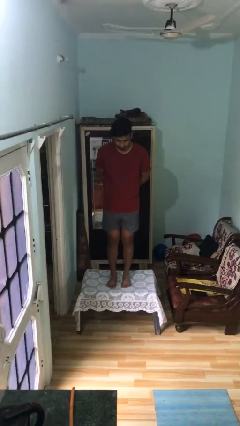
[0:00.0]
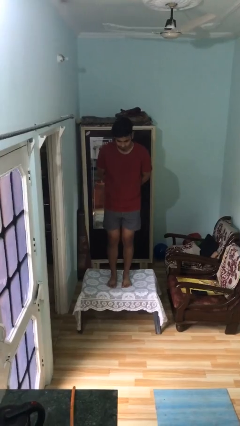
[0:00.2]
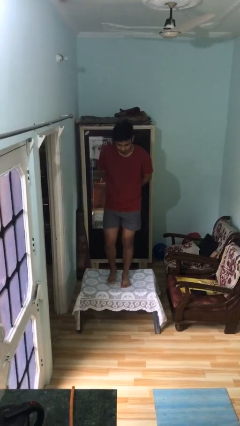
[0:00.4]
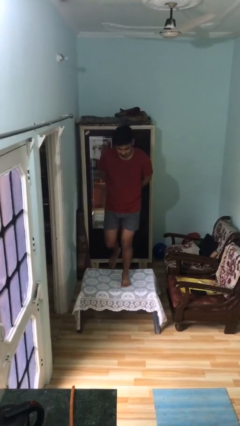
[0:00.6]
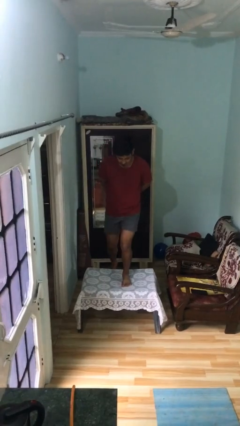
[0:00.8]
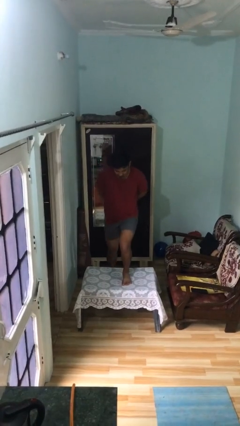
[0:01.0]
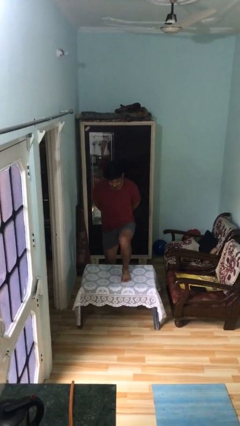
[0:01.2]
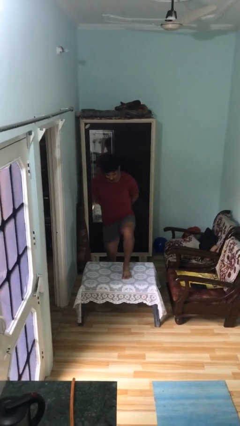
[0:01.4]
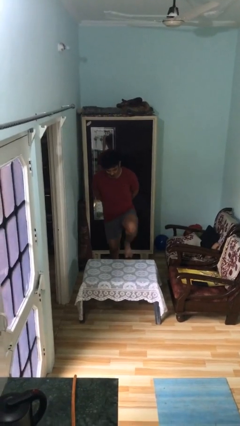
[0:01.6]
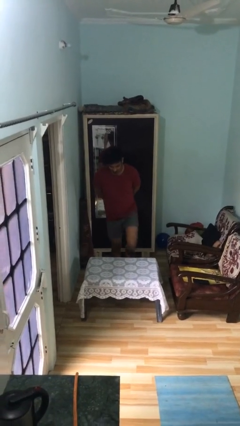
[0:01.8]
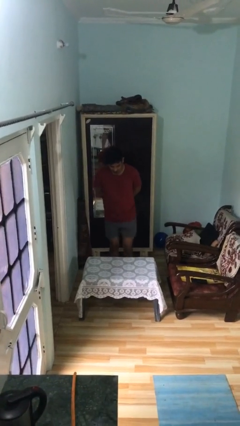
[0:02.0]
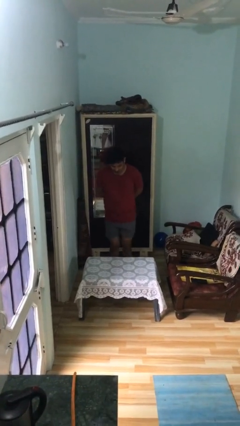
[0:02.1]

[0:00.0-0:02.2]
person climbs off table

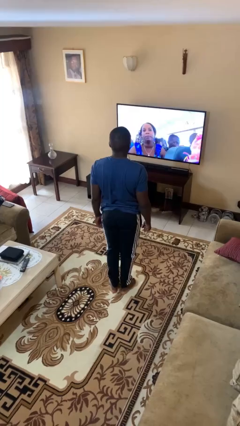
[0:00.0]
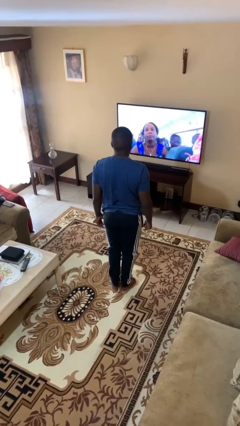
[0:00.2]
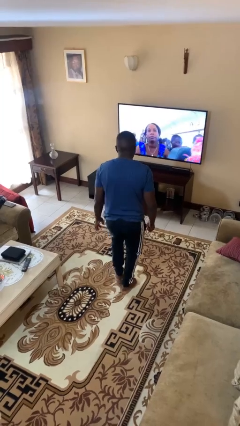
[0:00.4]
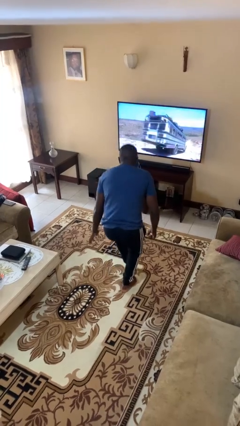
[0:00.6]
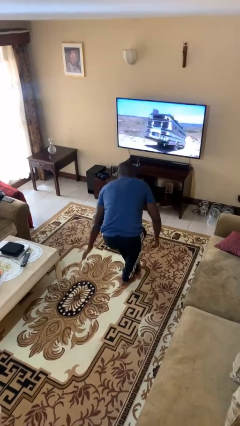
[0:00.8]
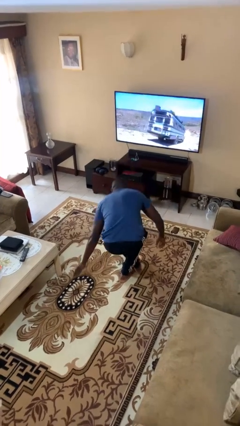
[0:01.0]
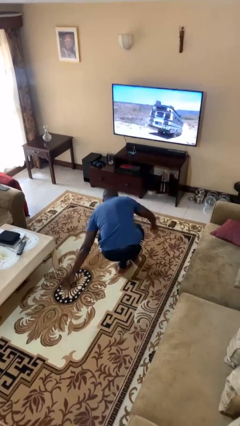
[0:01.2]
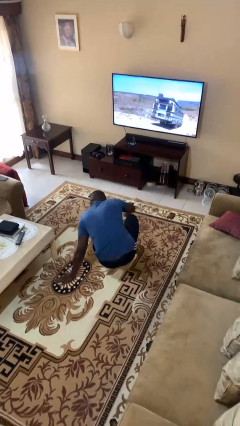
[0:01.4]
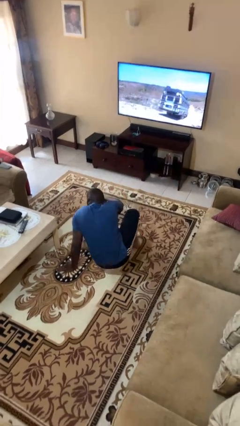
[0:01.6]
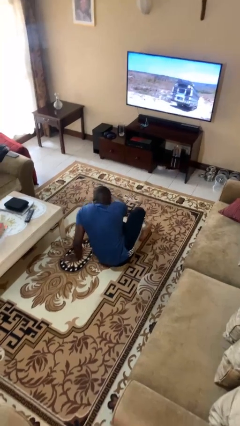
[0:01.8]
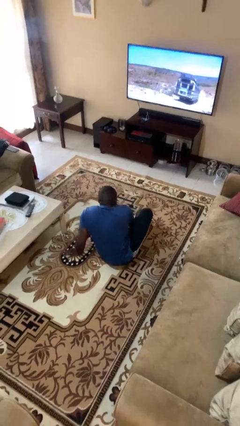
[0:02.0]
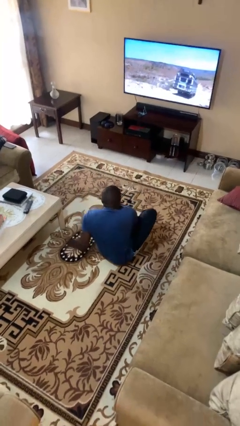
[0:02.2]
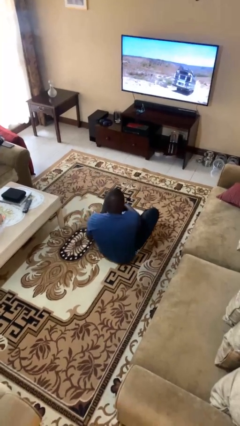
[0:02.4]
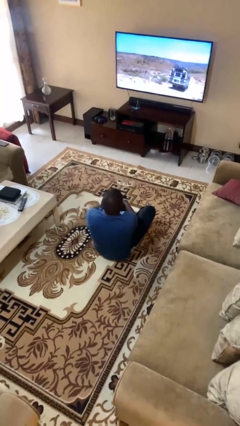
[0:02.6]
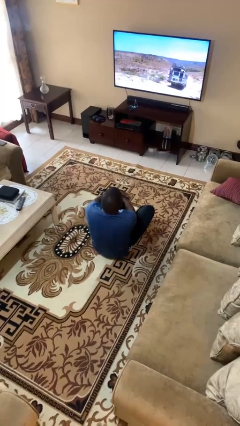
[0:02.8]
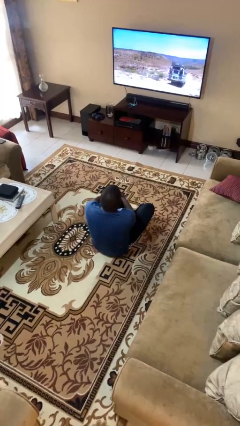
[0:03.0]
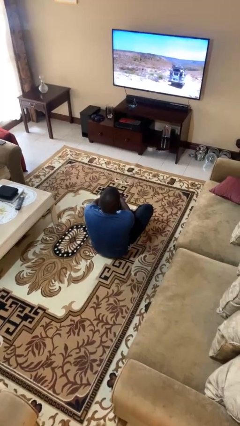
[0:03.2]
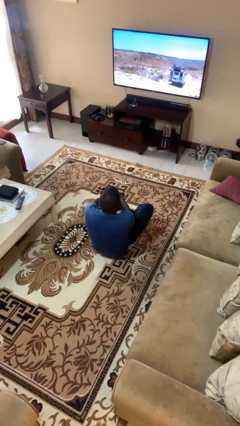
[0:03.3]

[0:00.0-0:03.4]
person sits crisscross

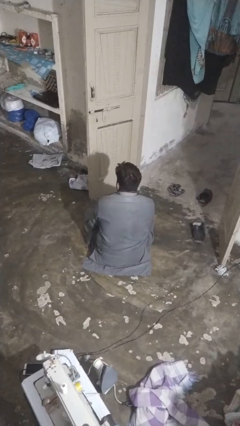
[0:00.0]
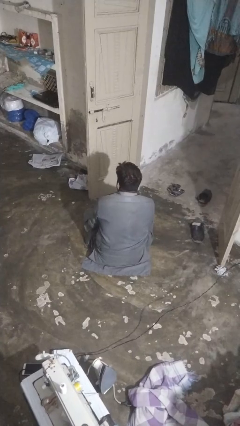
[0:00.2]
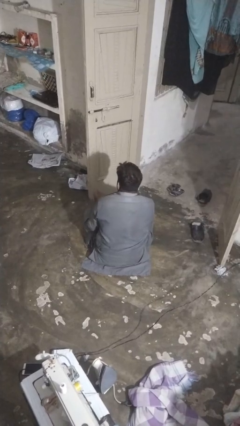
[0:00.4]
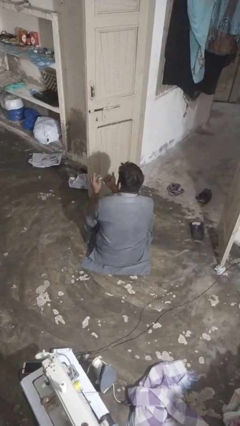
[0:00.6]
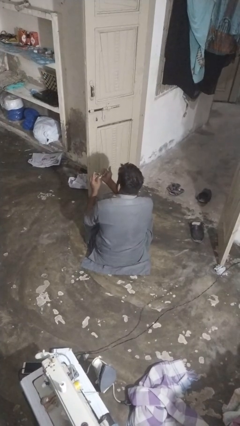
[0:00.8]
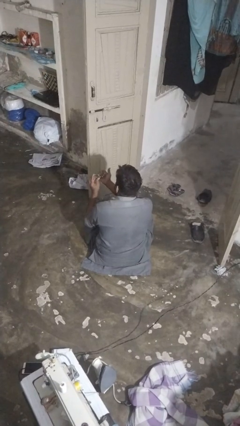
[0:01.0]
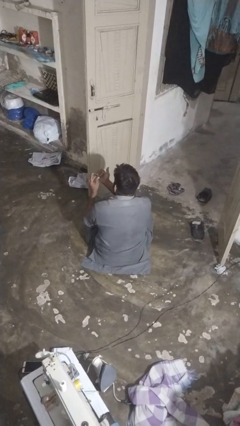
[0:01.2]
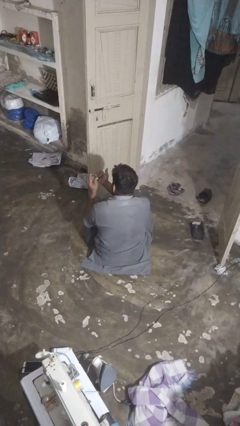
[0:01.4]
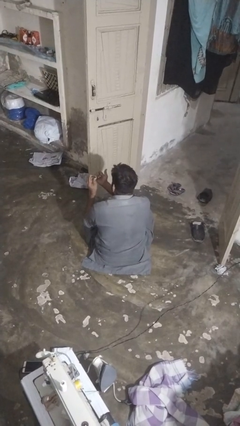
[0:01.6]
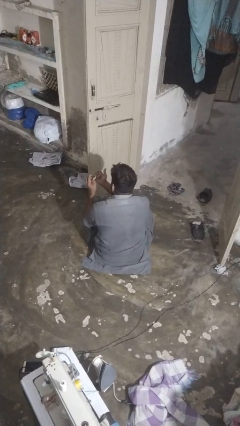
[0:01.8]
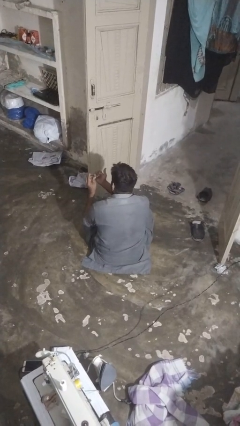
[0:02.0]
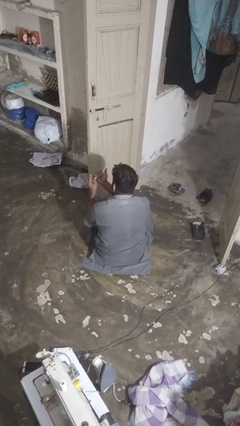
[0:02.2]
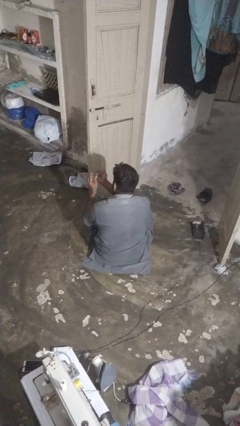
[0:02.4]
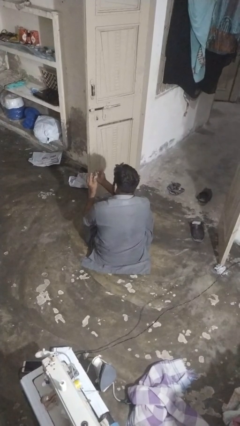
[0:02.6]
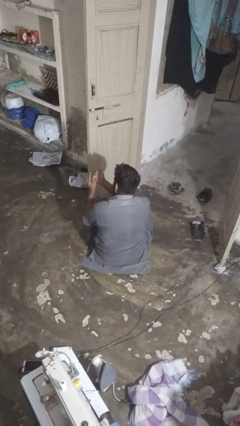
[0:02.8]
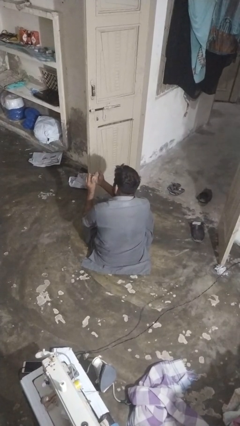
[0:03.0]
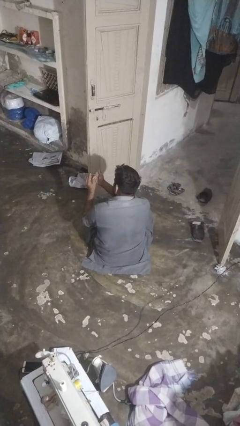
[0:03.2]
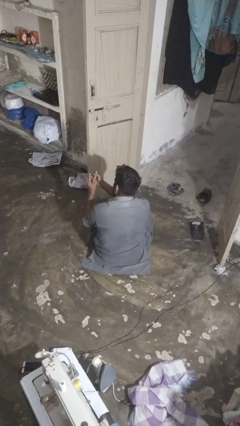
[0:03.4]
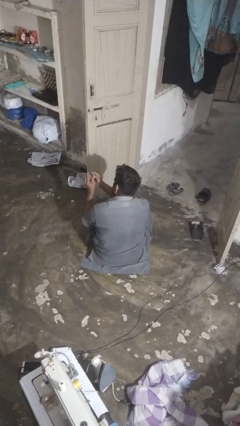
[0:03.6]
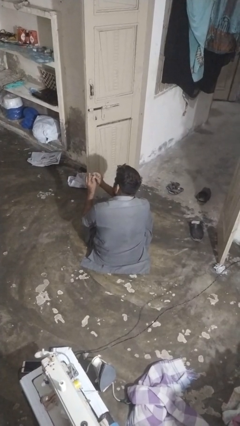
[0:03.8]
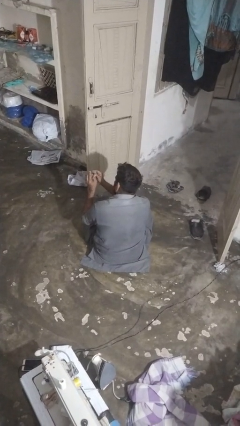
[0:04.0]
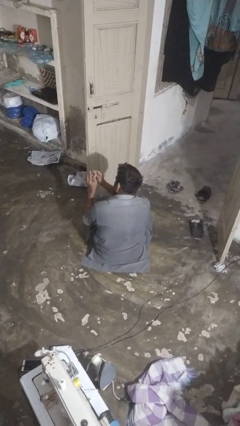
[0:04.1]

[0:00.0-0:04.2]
person clips fingernails

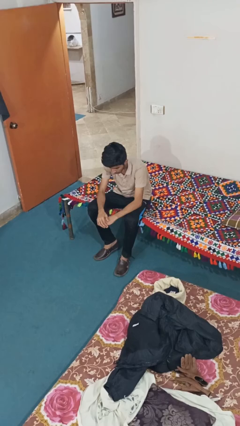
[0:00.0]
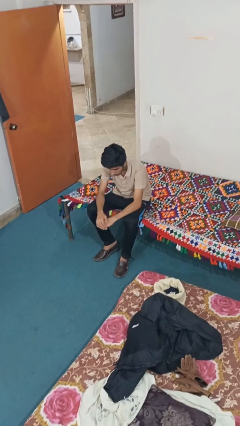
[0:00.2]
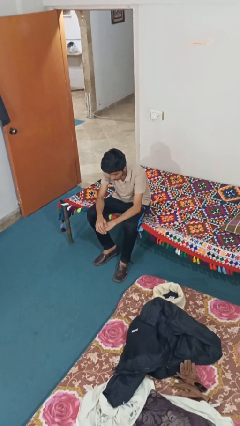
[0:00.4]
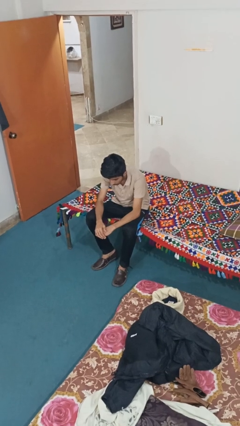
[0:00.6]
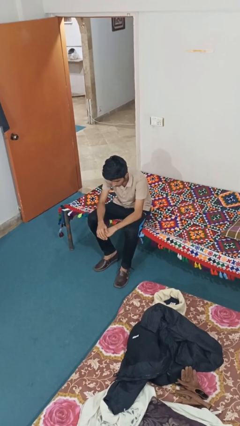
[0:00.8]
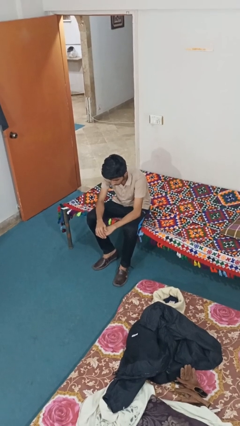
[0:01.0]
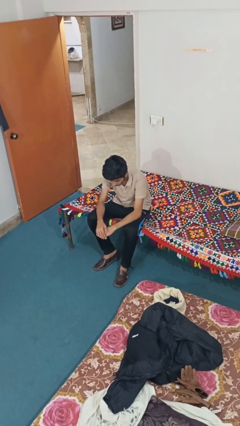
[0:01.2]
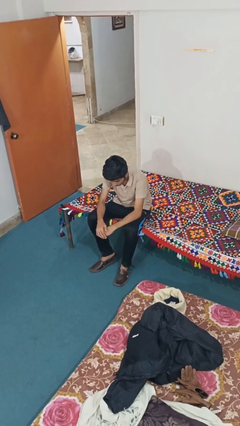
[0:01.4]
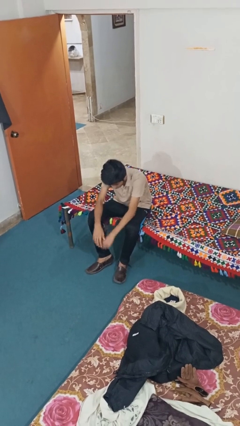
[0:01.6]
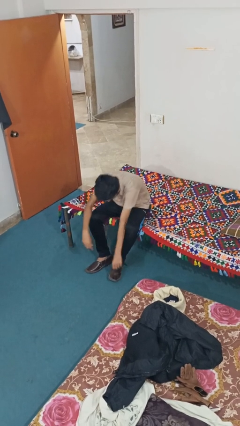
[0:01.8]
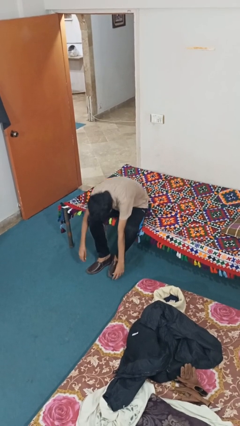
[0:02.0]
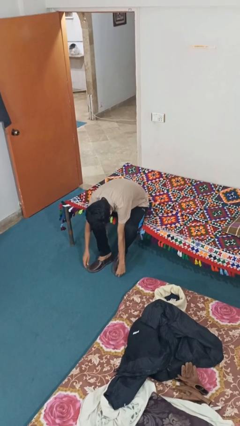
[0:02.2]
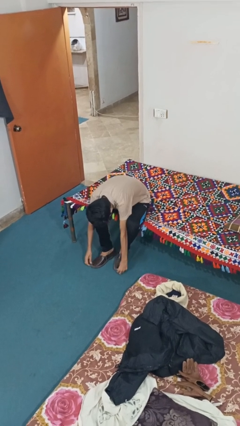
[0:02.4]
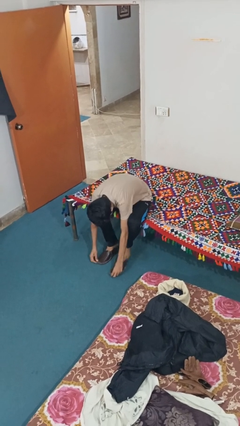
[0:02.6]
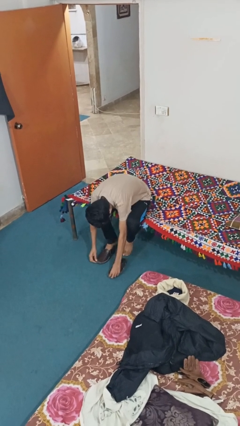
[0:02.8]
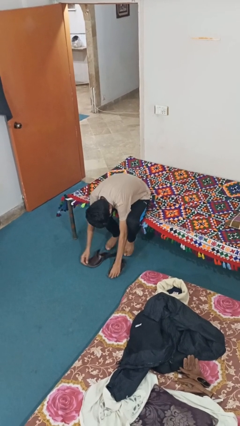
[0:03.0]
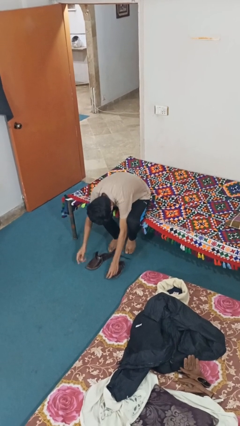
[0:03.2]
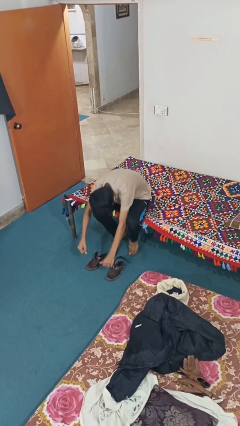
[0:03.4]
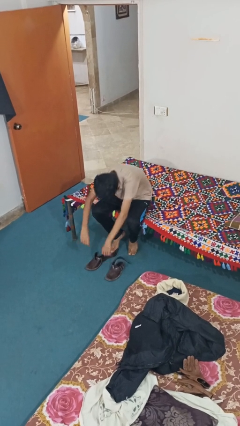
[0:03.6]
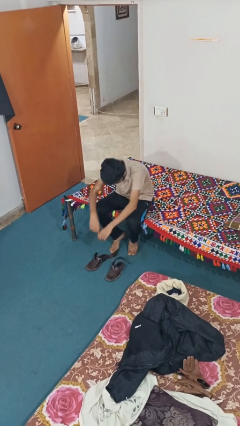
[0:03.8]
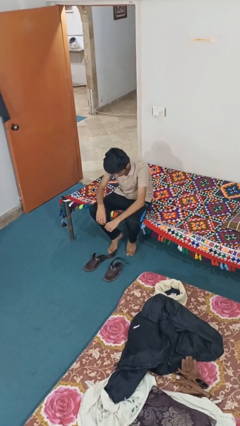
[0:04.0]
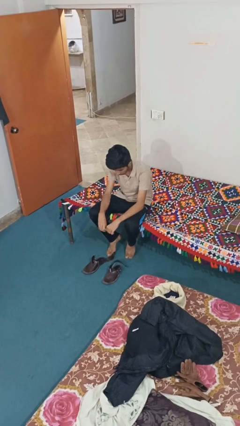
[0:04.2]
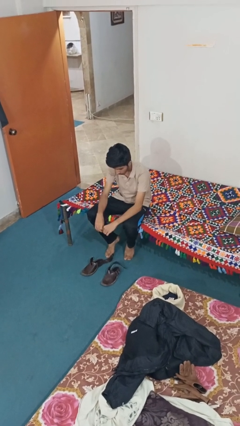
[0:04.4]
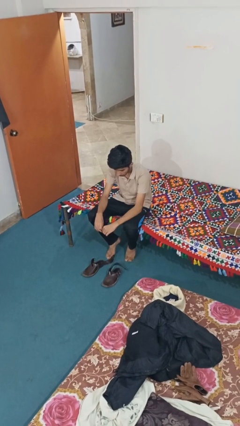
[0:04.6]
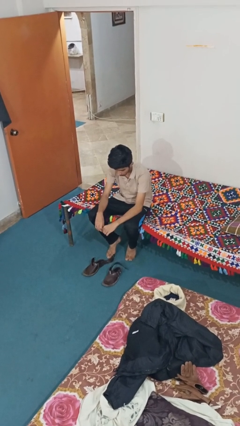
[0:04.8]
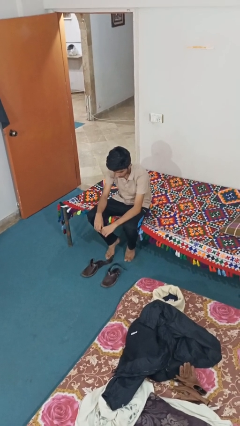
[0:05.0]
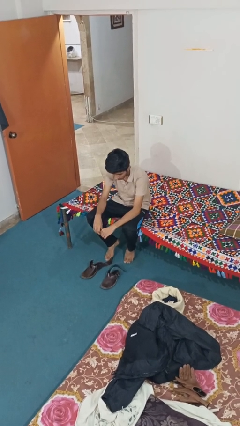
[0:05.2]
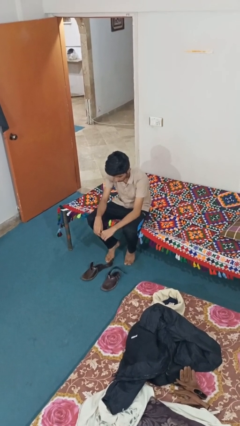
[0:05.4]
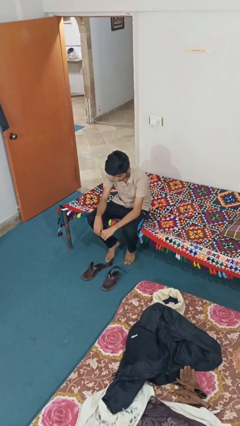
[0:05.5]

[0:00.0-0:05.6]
person takes off shoes

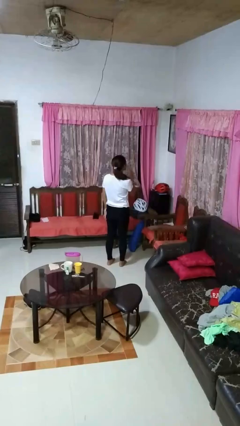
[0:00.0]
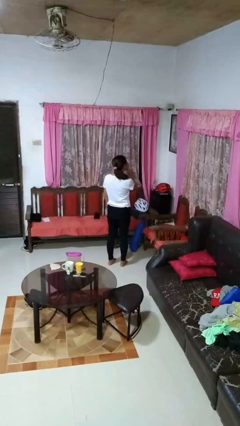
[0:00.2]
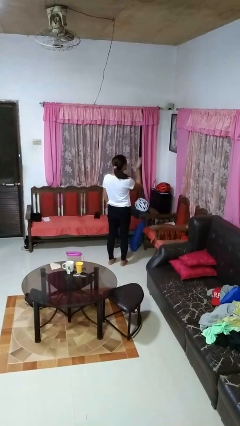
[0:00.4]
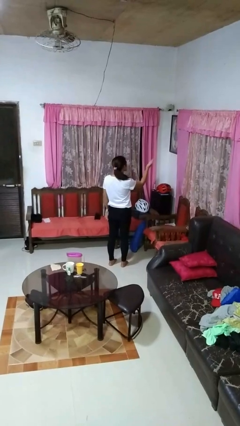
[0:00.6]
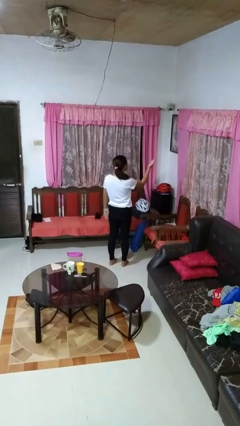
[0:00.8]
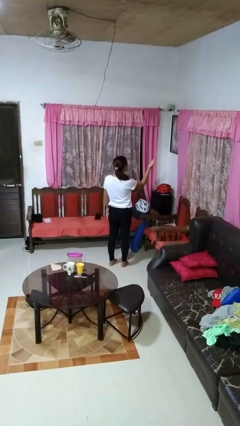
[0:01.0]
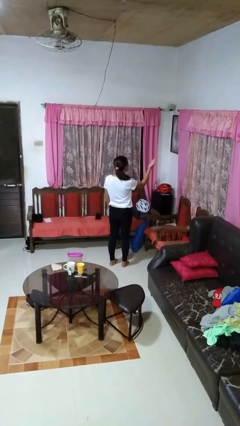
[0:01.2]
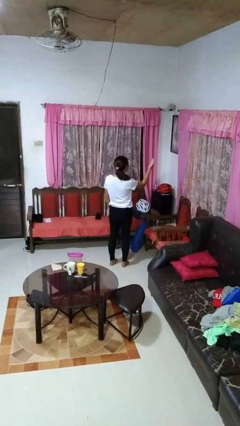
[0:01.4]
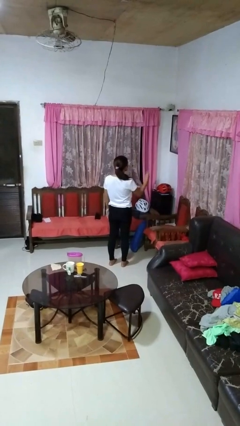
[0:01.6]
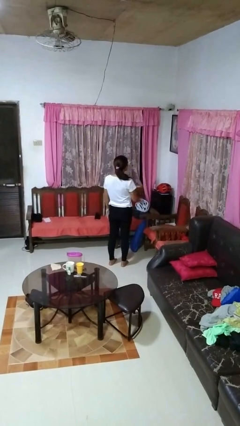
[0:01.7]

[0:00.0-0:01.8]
person gestures blow kiss

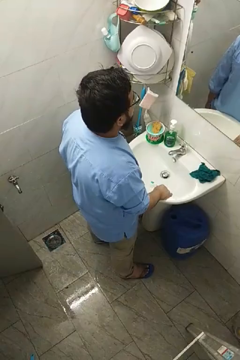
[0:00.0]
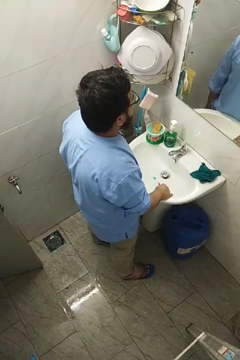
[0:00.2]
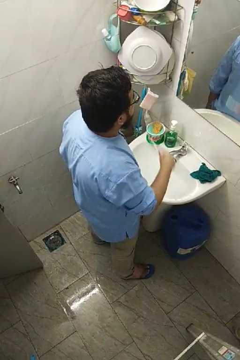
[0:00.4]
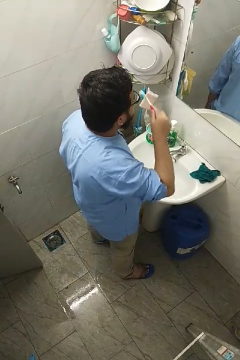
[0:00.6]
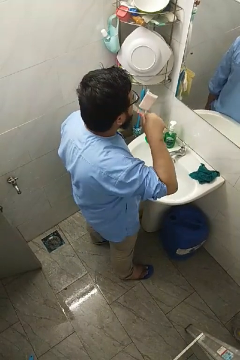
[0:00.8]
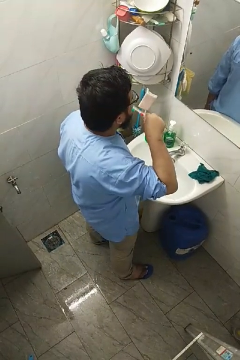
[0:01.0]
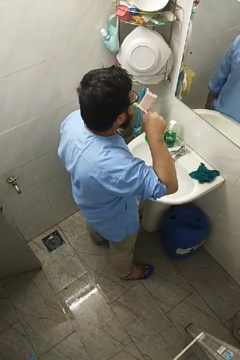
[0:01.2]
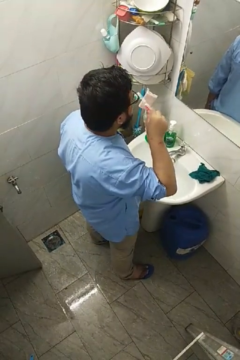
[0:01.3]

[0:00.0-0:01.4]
person brushes teeth
